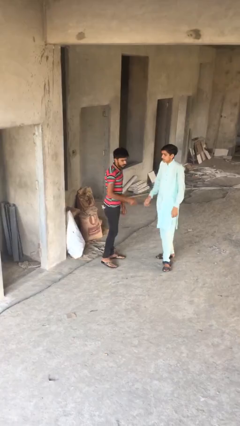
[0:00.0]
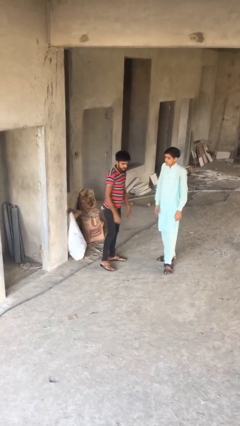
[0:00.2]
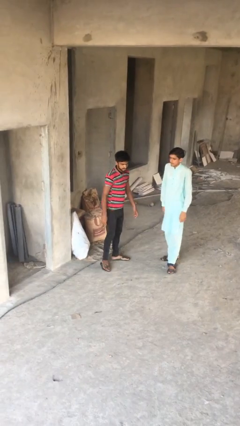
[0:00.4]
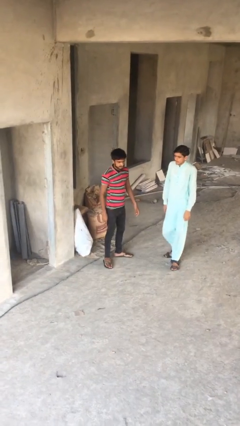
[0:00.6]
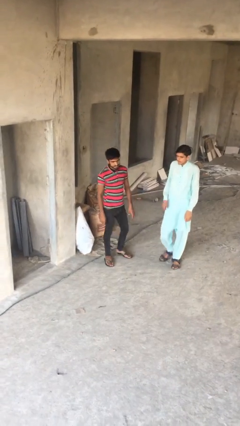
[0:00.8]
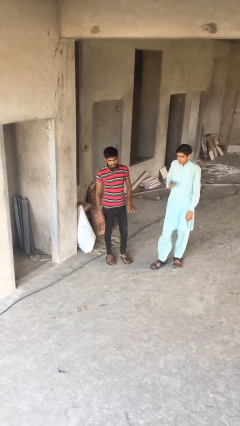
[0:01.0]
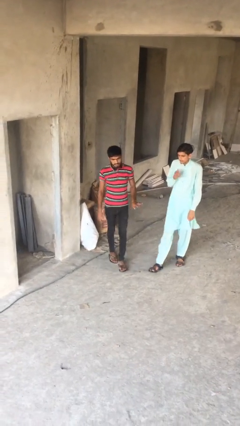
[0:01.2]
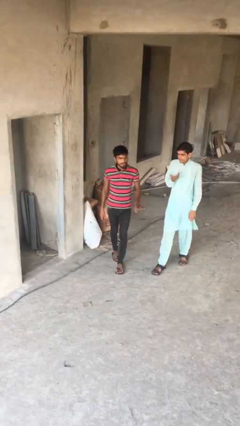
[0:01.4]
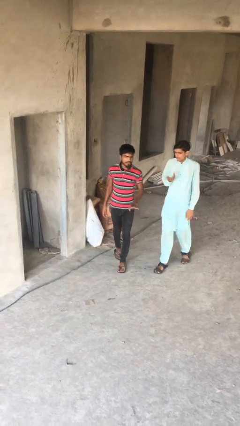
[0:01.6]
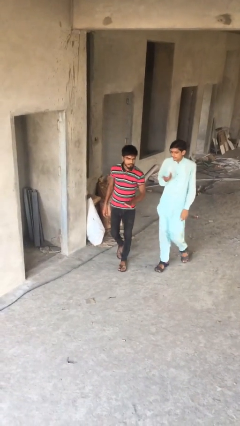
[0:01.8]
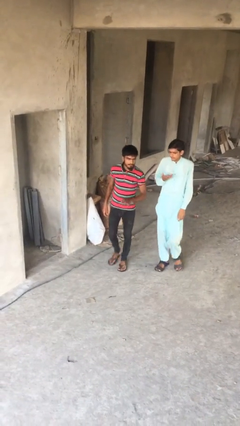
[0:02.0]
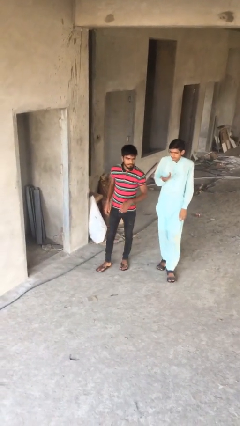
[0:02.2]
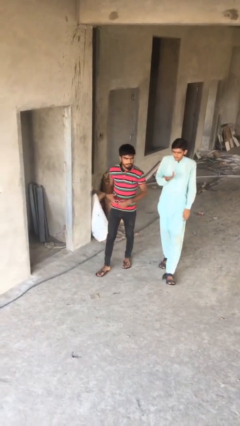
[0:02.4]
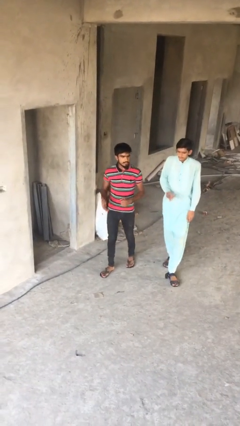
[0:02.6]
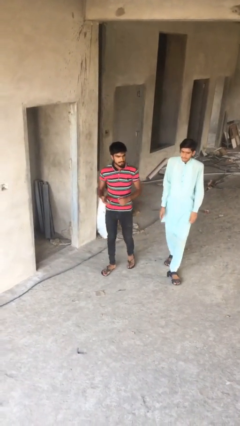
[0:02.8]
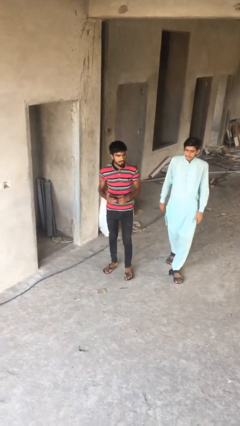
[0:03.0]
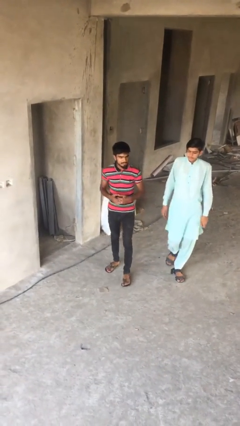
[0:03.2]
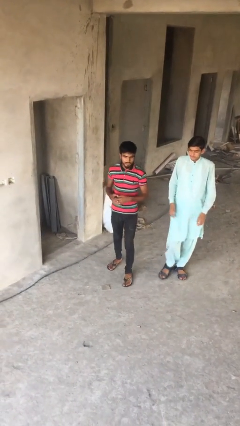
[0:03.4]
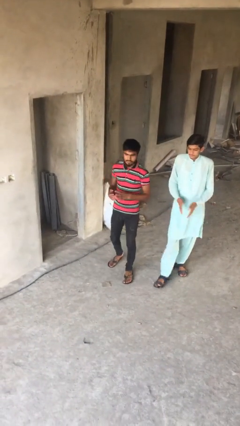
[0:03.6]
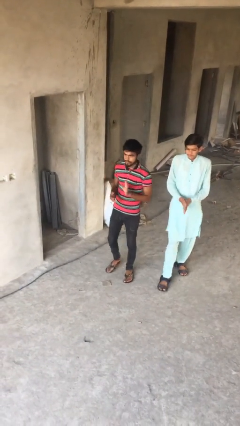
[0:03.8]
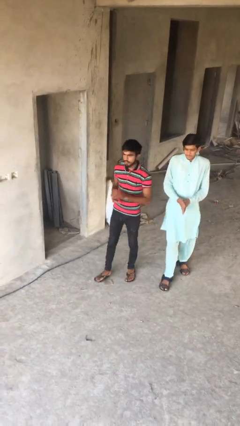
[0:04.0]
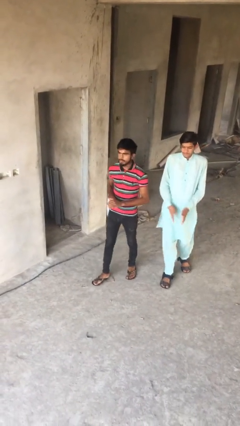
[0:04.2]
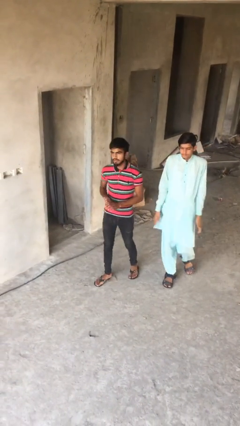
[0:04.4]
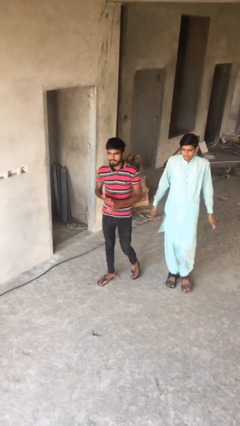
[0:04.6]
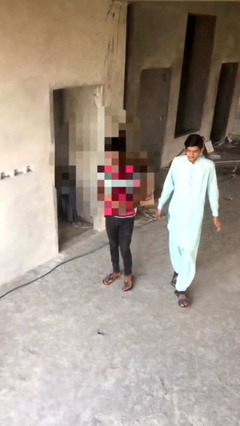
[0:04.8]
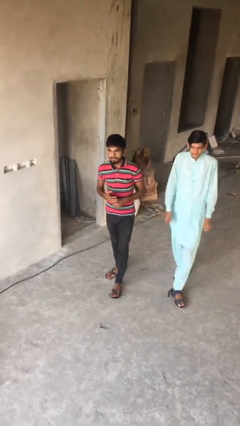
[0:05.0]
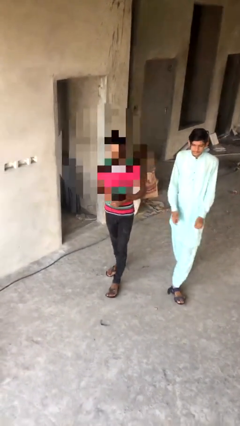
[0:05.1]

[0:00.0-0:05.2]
person talks to person

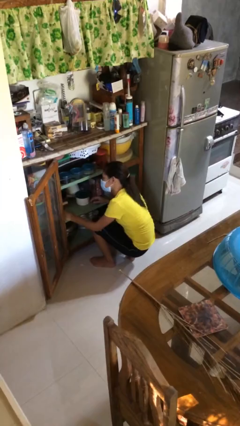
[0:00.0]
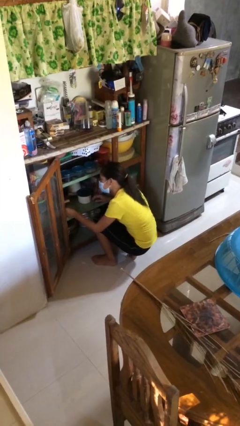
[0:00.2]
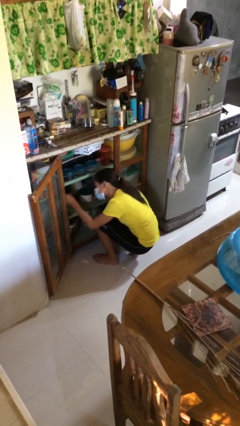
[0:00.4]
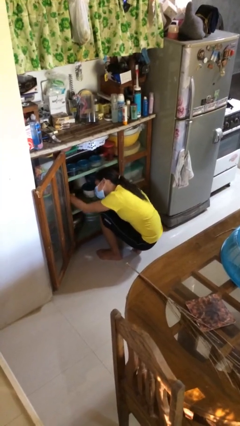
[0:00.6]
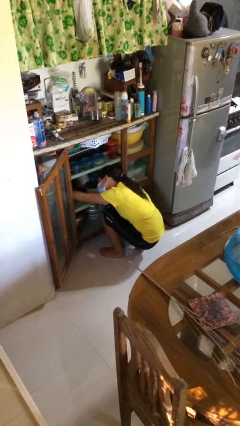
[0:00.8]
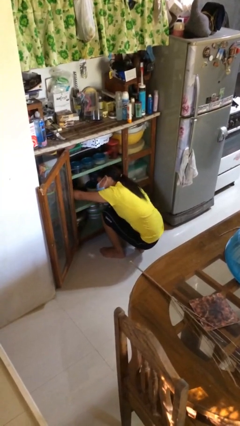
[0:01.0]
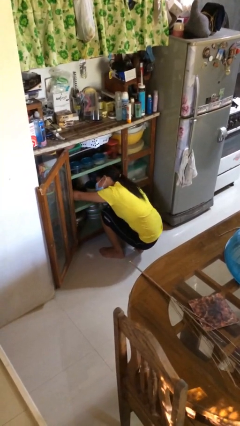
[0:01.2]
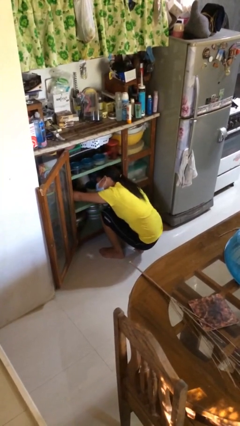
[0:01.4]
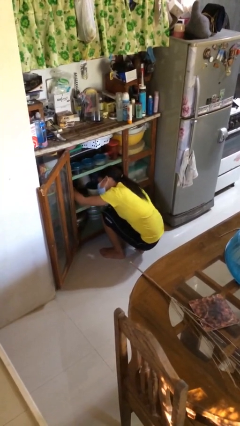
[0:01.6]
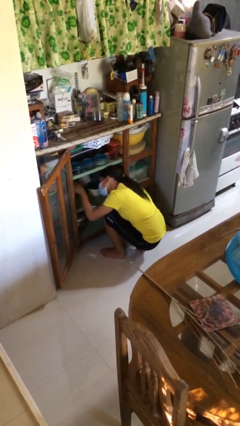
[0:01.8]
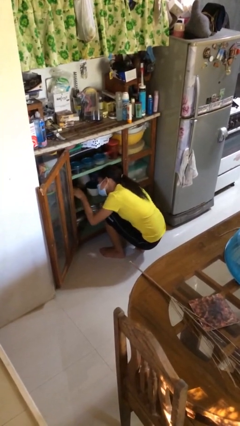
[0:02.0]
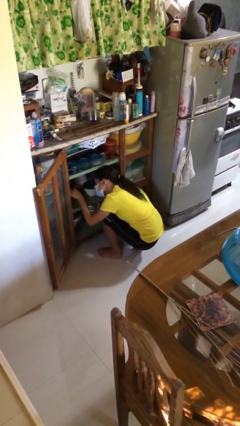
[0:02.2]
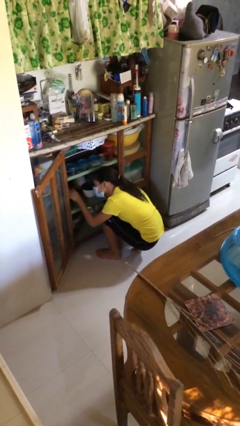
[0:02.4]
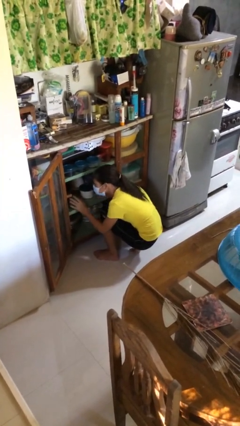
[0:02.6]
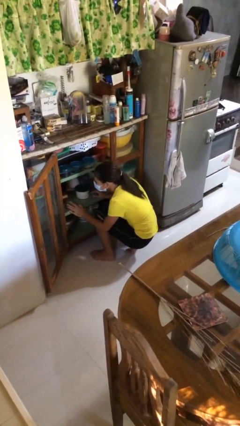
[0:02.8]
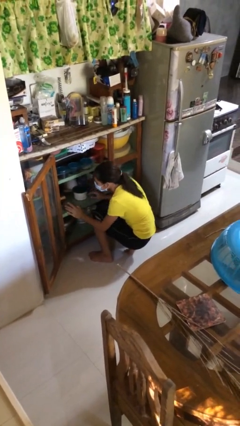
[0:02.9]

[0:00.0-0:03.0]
person searches in cabinet

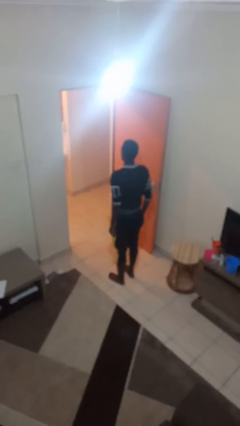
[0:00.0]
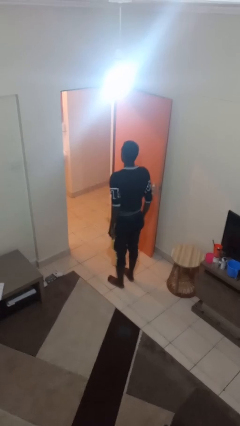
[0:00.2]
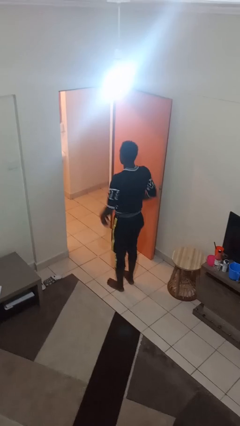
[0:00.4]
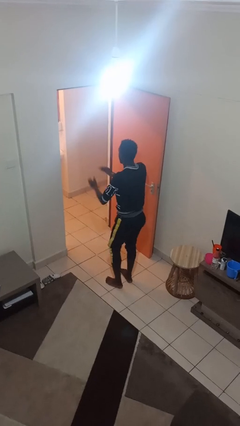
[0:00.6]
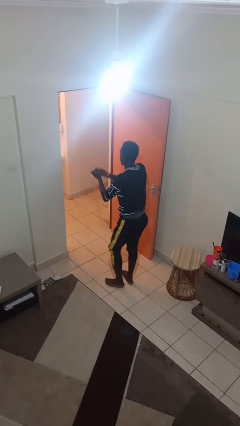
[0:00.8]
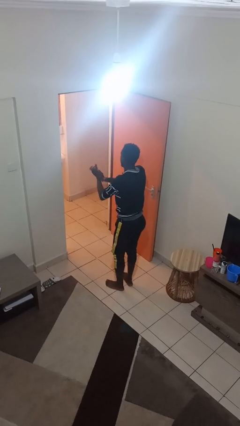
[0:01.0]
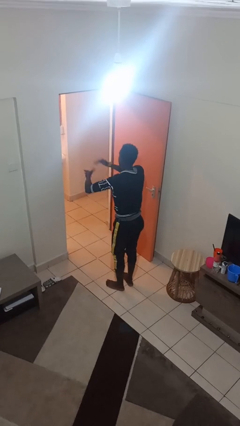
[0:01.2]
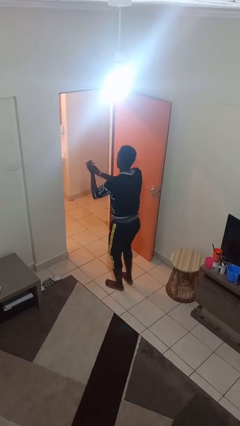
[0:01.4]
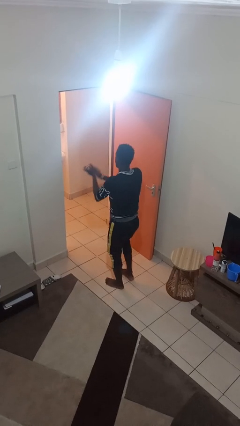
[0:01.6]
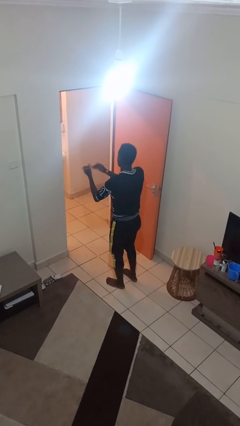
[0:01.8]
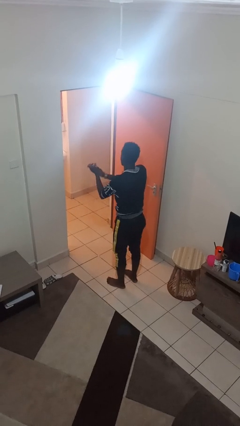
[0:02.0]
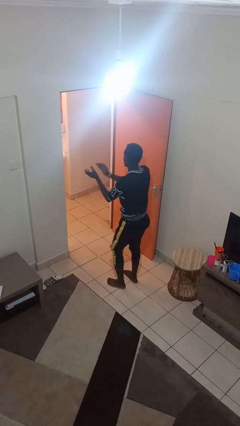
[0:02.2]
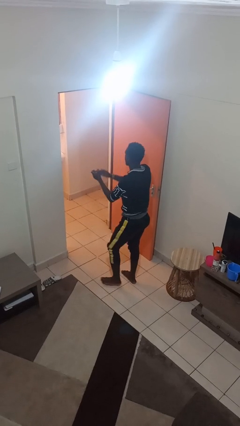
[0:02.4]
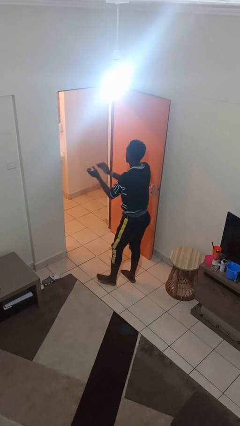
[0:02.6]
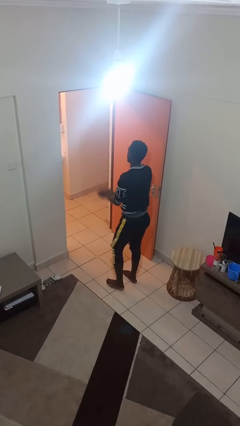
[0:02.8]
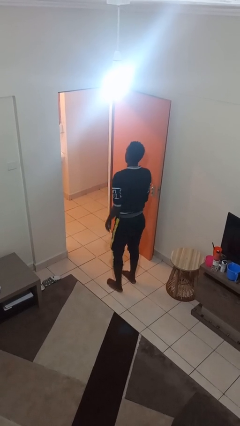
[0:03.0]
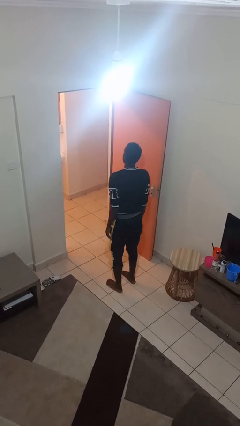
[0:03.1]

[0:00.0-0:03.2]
person claps hands

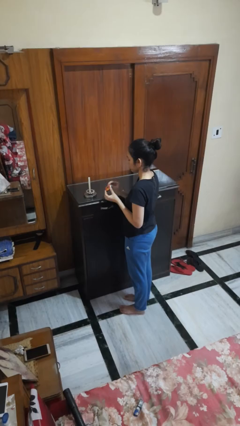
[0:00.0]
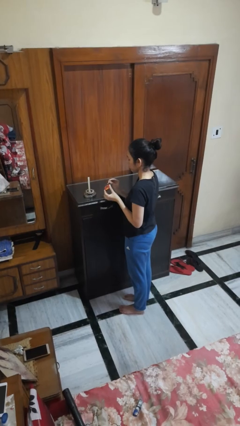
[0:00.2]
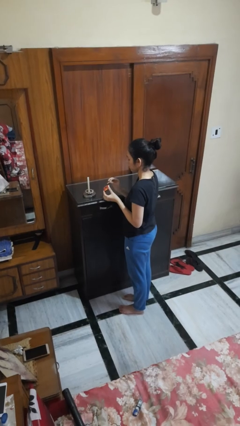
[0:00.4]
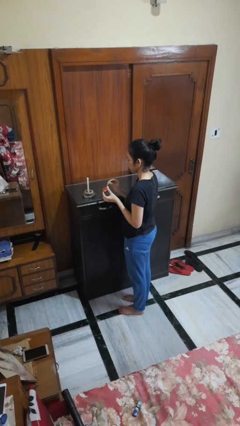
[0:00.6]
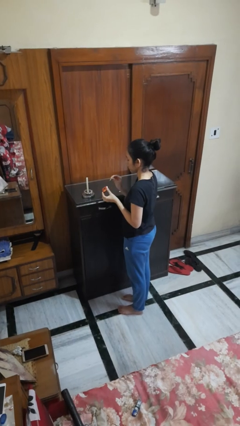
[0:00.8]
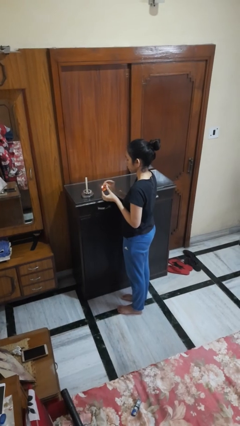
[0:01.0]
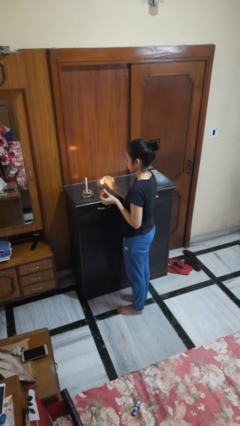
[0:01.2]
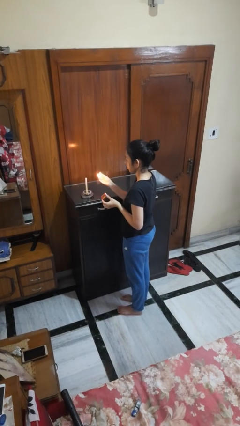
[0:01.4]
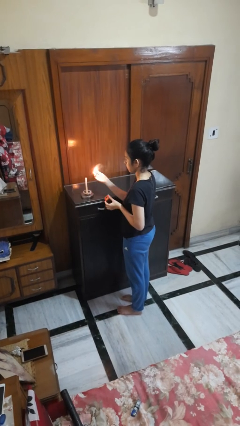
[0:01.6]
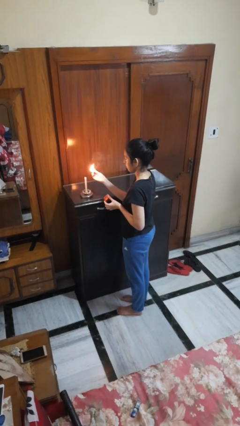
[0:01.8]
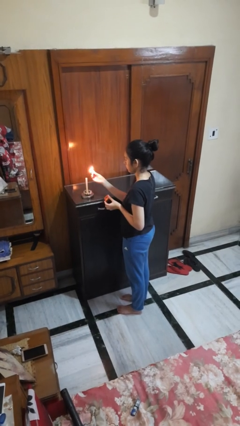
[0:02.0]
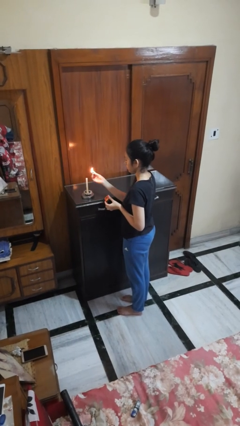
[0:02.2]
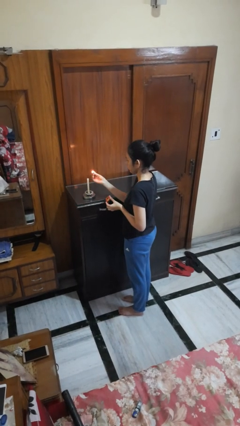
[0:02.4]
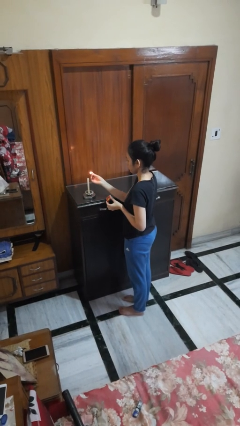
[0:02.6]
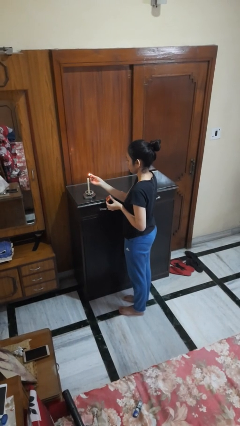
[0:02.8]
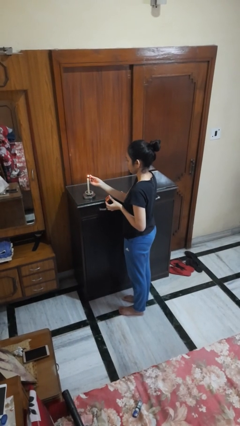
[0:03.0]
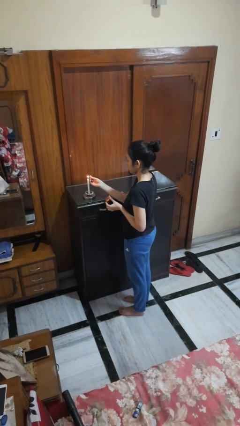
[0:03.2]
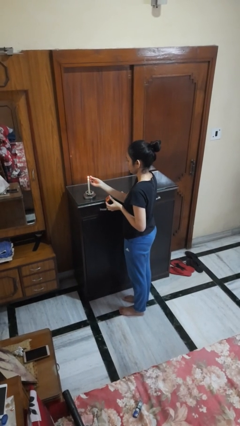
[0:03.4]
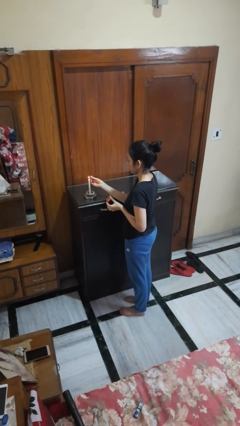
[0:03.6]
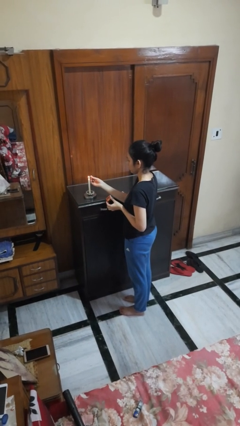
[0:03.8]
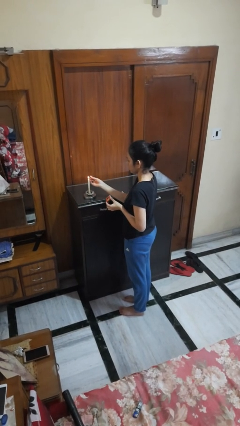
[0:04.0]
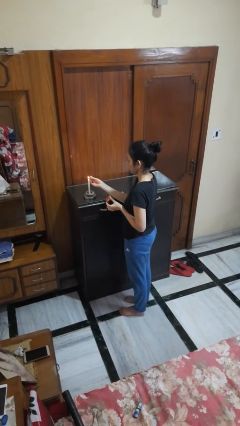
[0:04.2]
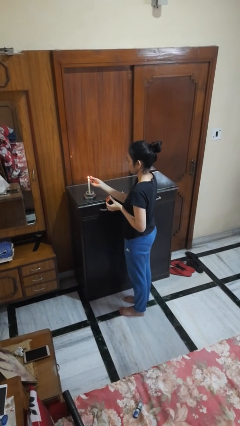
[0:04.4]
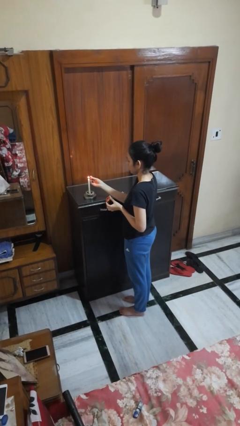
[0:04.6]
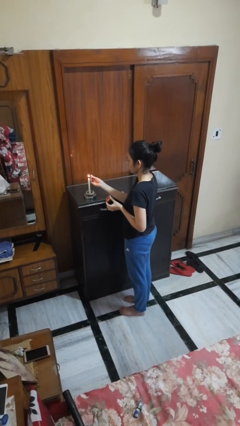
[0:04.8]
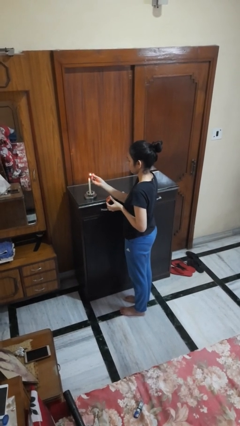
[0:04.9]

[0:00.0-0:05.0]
person lights candle

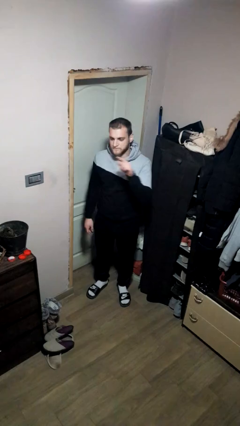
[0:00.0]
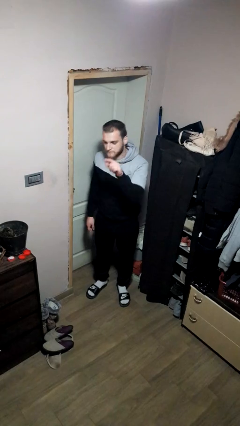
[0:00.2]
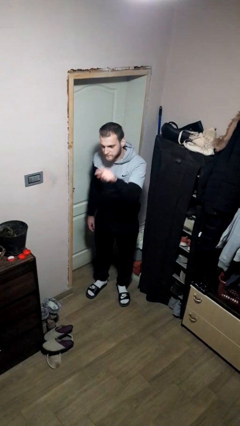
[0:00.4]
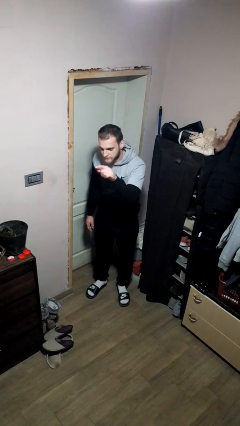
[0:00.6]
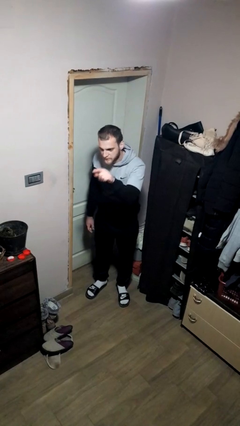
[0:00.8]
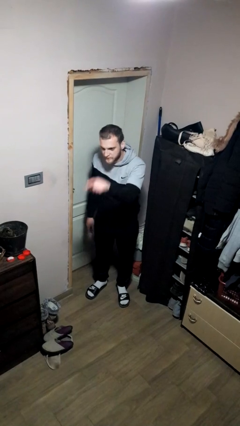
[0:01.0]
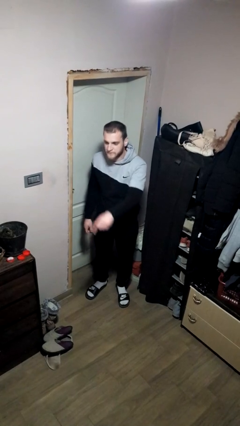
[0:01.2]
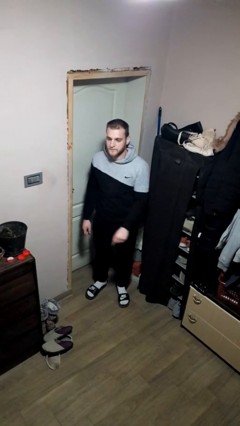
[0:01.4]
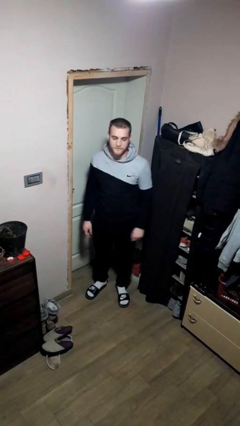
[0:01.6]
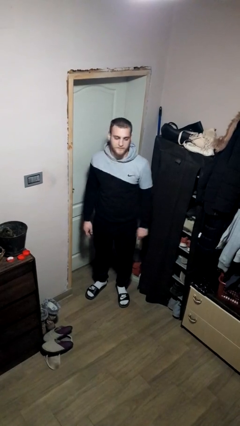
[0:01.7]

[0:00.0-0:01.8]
person points at person
